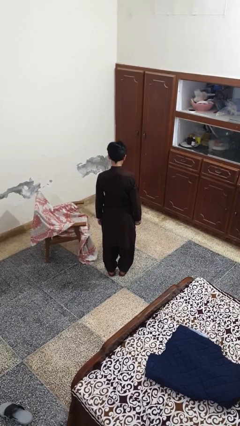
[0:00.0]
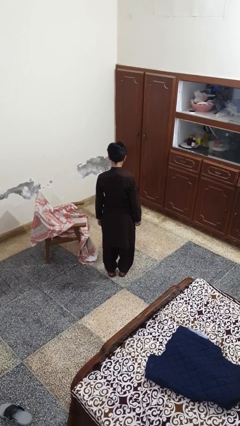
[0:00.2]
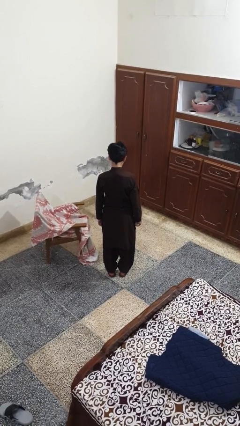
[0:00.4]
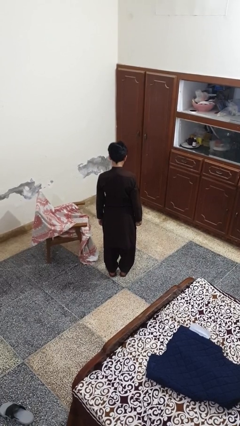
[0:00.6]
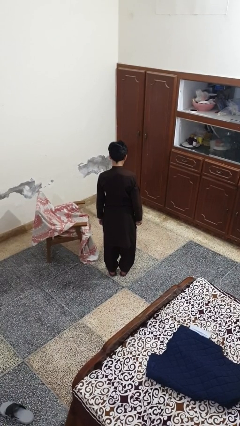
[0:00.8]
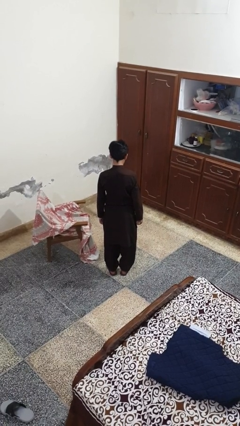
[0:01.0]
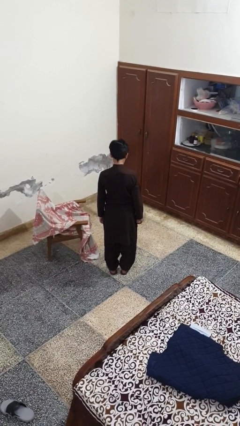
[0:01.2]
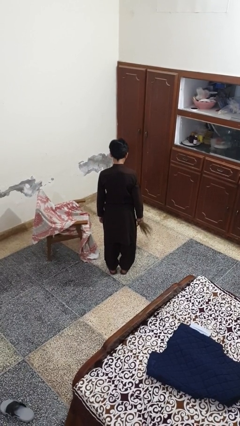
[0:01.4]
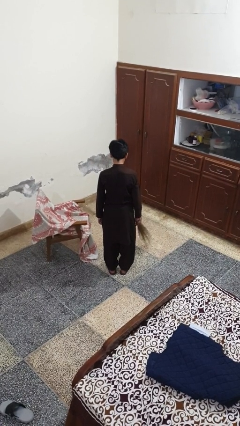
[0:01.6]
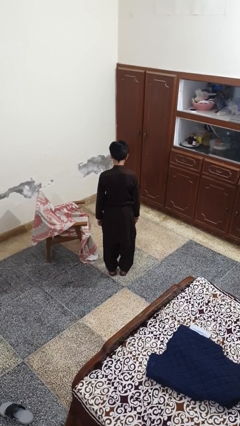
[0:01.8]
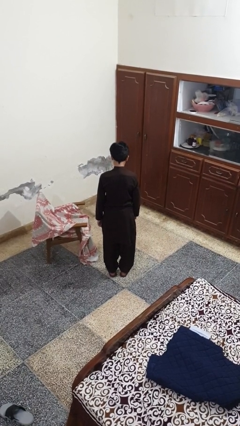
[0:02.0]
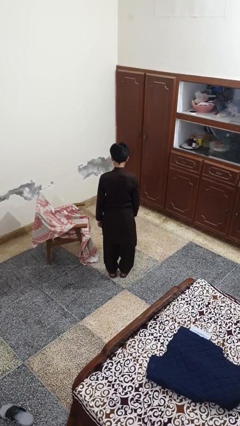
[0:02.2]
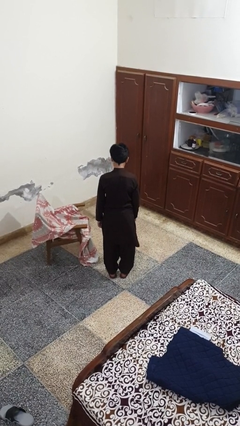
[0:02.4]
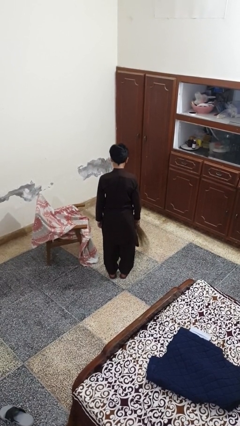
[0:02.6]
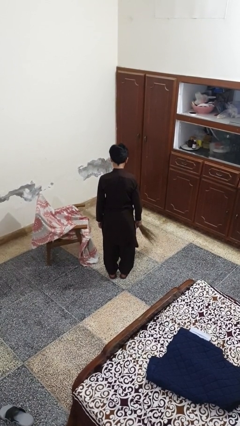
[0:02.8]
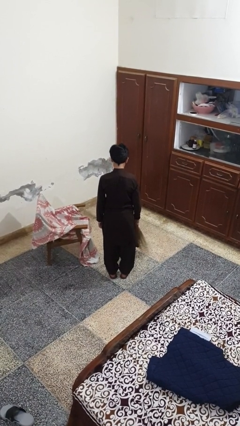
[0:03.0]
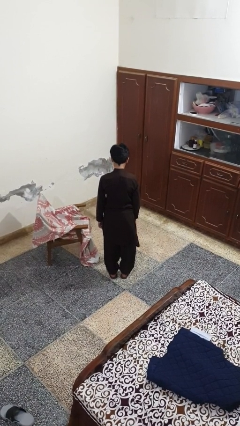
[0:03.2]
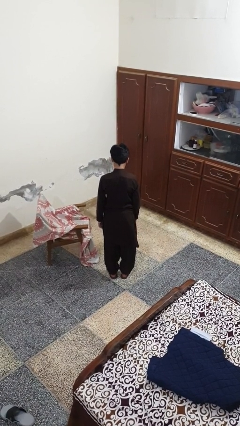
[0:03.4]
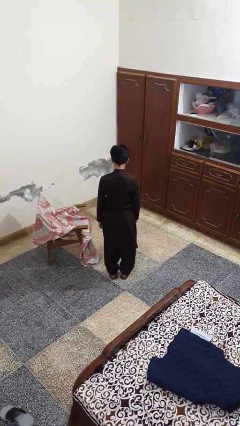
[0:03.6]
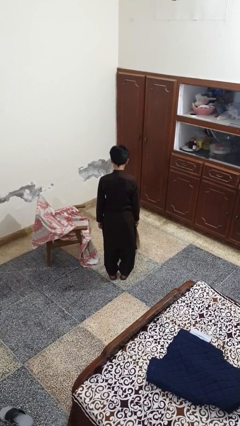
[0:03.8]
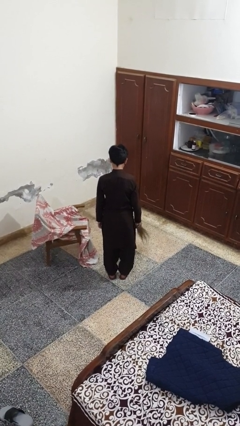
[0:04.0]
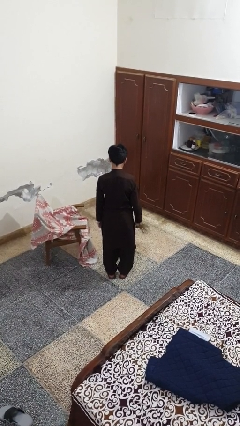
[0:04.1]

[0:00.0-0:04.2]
person sweeps floor

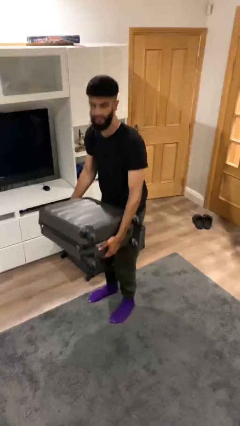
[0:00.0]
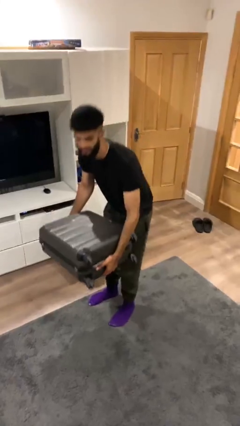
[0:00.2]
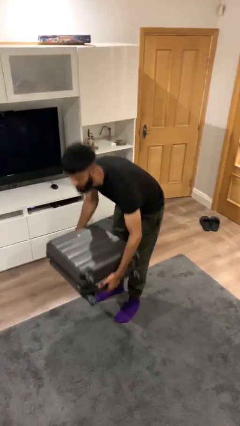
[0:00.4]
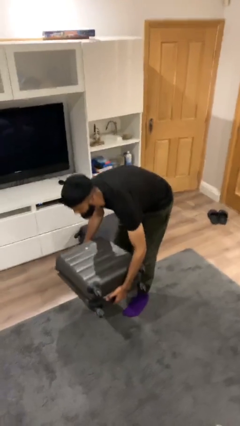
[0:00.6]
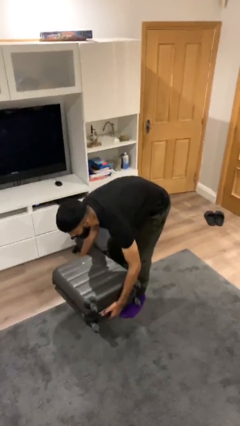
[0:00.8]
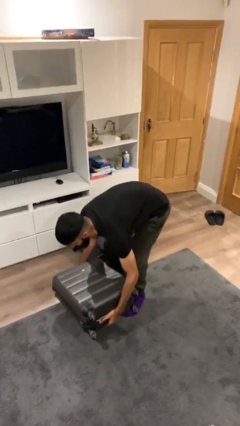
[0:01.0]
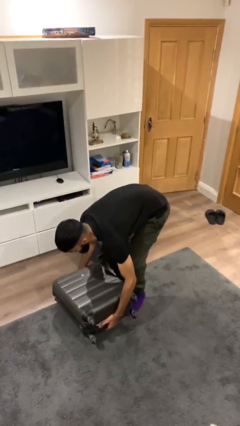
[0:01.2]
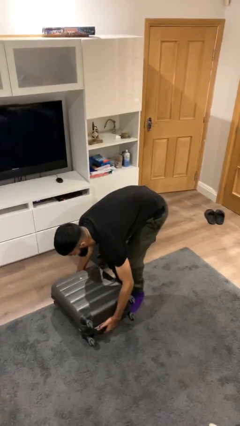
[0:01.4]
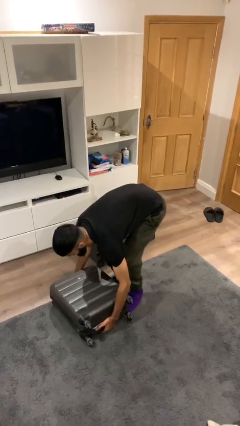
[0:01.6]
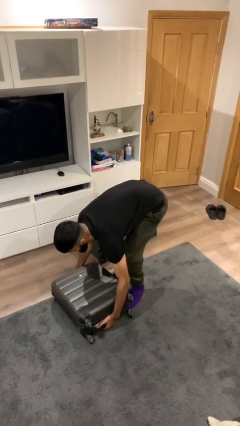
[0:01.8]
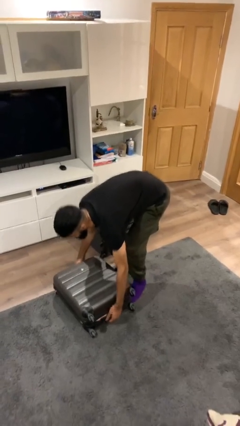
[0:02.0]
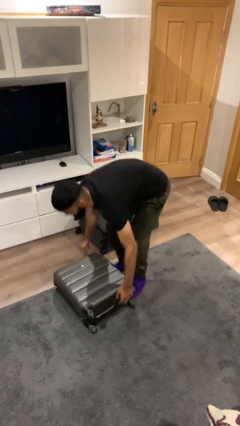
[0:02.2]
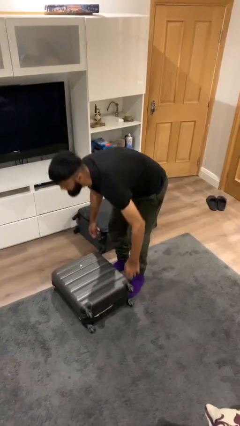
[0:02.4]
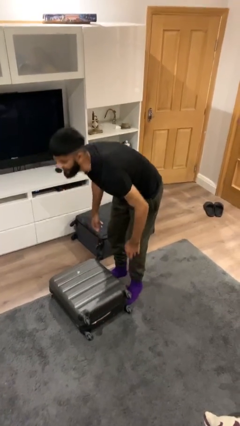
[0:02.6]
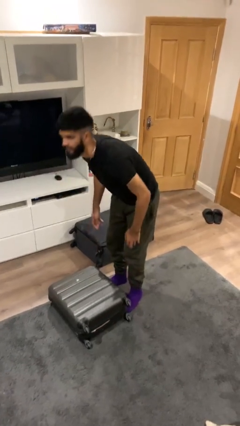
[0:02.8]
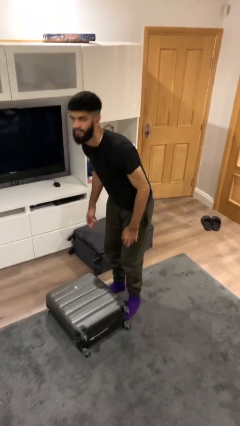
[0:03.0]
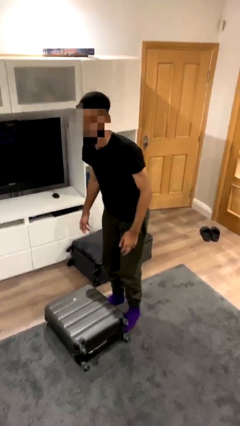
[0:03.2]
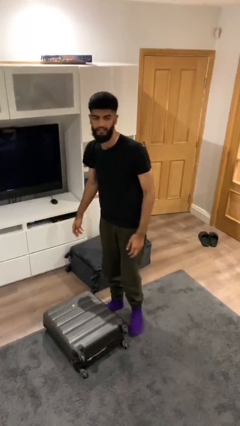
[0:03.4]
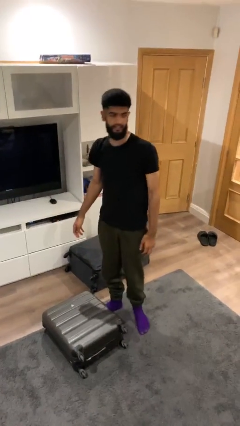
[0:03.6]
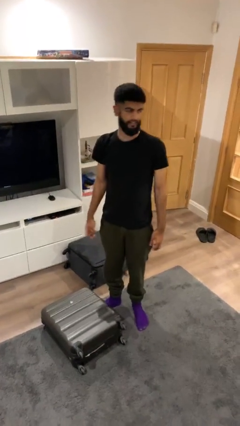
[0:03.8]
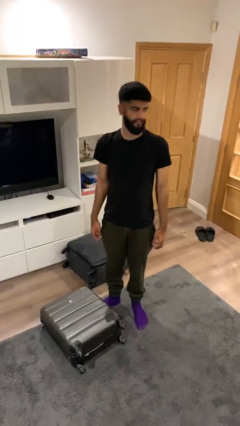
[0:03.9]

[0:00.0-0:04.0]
person puts down object on floor

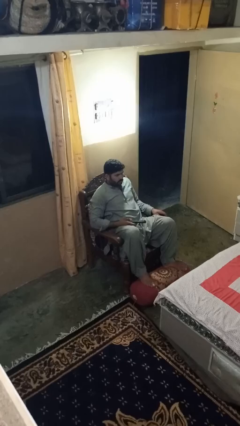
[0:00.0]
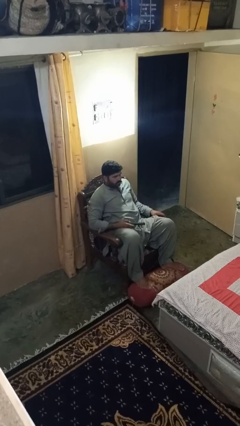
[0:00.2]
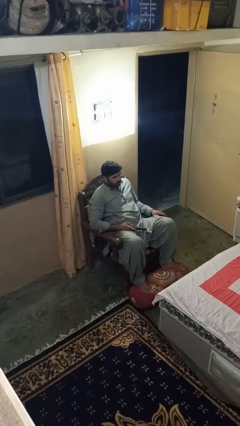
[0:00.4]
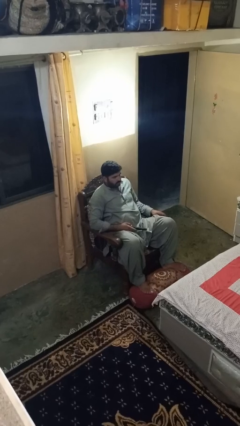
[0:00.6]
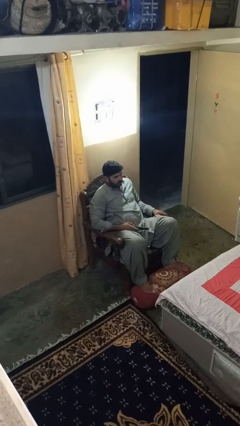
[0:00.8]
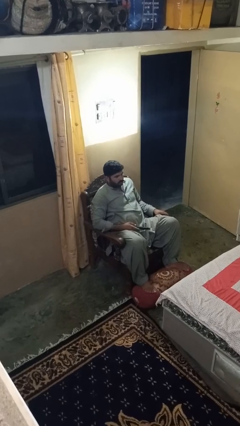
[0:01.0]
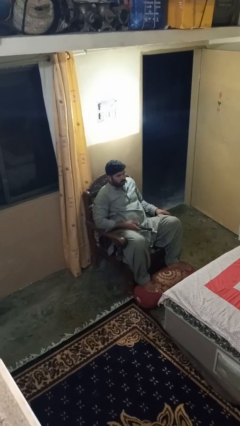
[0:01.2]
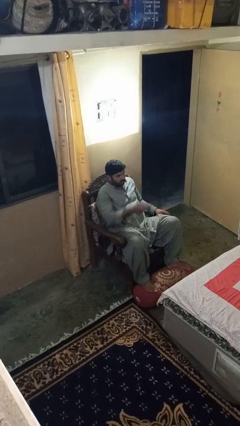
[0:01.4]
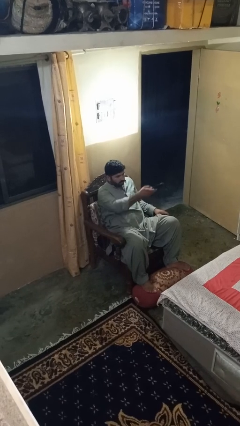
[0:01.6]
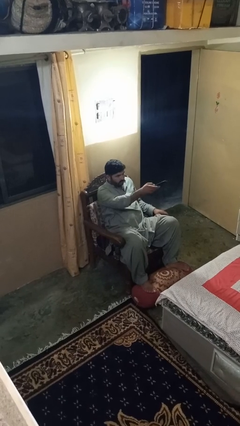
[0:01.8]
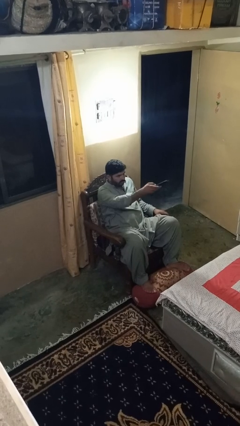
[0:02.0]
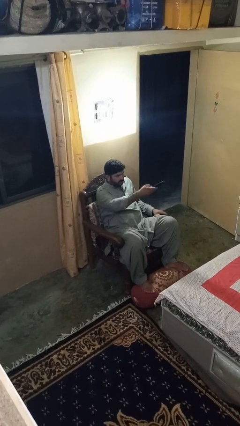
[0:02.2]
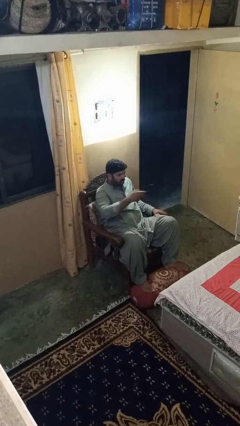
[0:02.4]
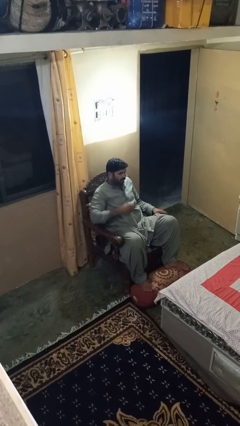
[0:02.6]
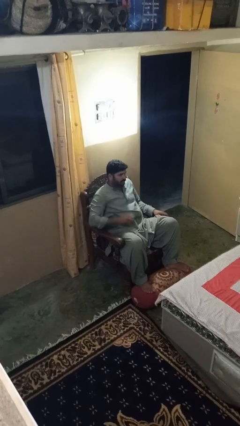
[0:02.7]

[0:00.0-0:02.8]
person uses television remote

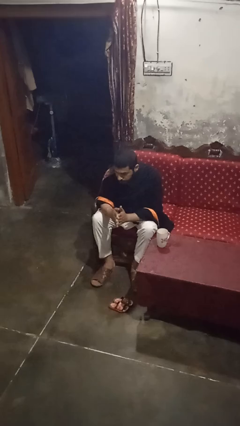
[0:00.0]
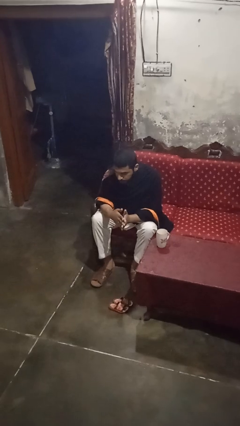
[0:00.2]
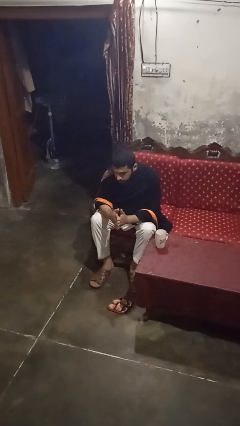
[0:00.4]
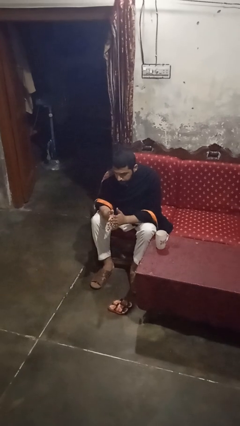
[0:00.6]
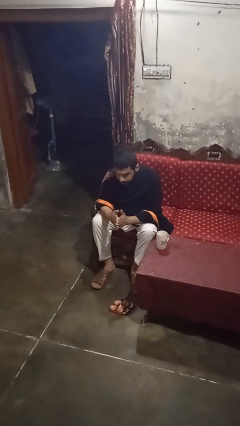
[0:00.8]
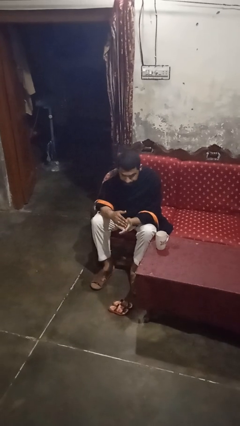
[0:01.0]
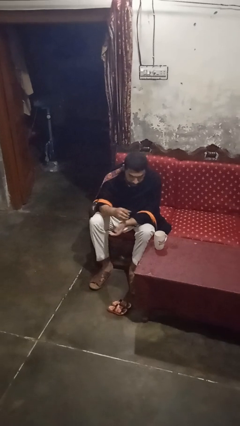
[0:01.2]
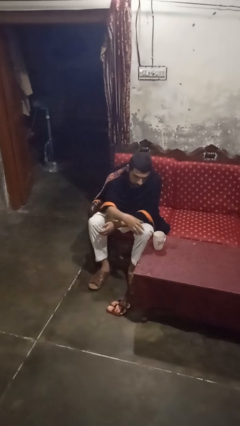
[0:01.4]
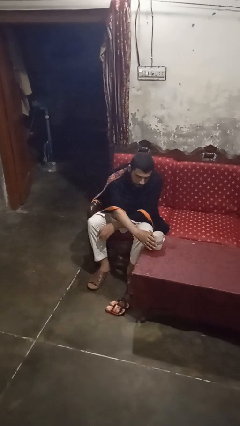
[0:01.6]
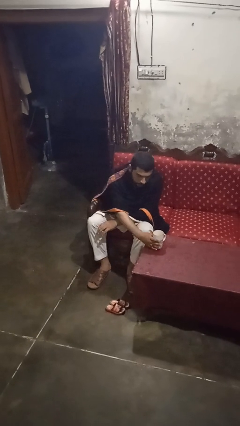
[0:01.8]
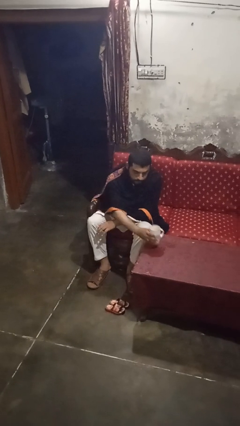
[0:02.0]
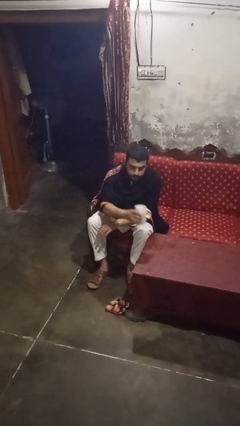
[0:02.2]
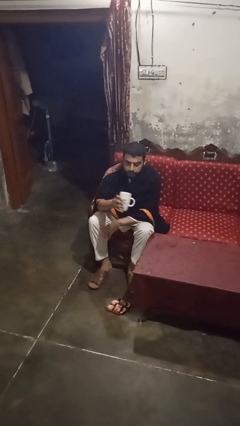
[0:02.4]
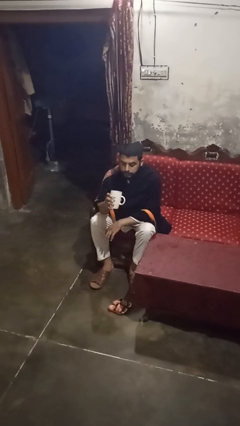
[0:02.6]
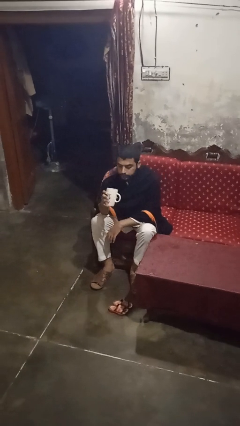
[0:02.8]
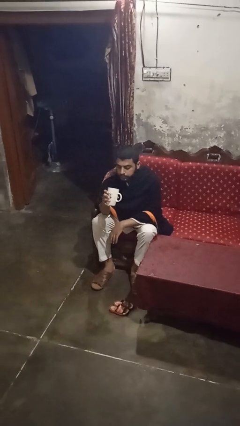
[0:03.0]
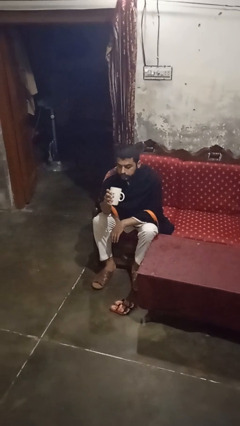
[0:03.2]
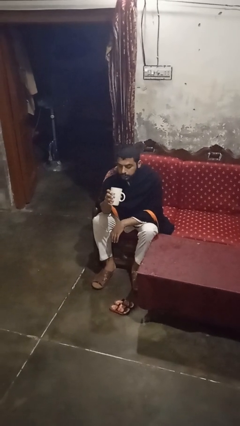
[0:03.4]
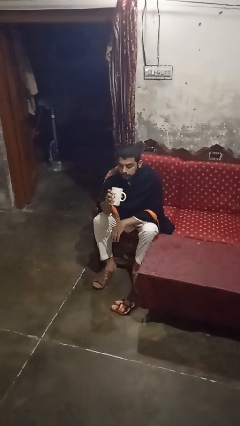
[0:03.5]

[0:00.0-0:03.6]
person picks up object from table

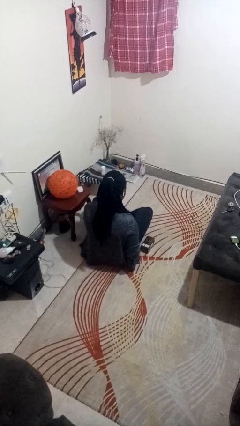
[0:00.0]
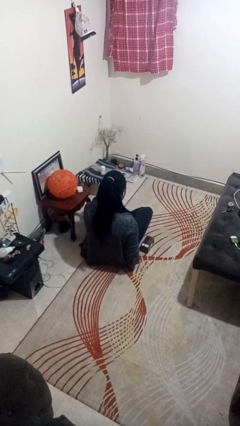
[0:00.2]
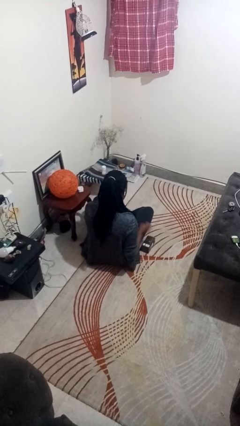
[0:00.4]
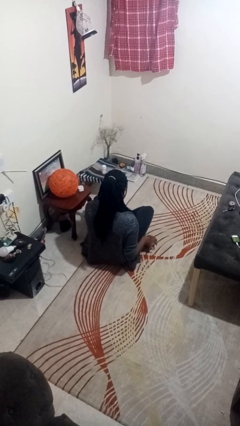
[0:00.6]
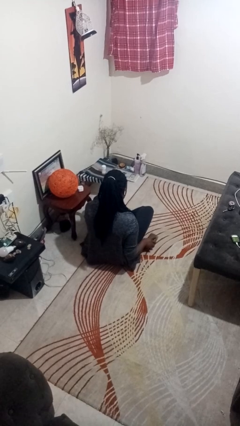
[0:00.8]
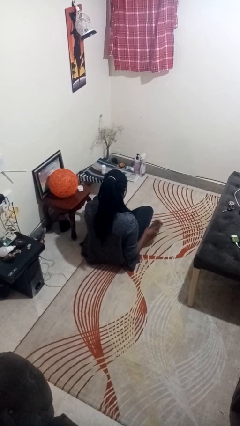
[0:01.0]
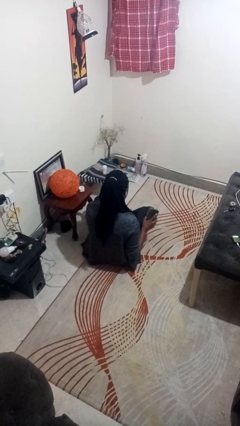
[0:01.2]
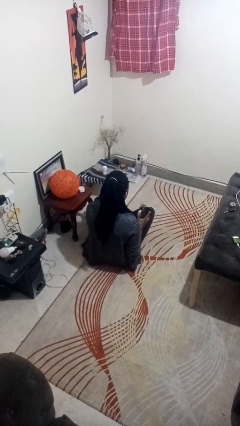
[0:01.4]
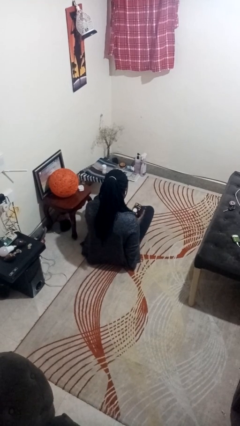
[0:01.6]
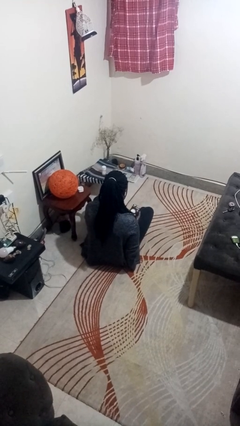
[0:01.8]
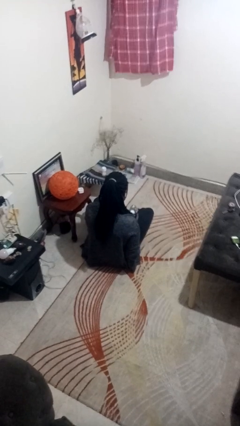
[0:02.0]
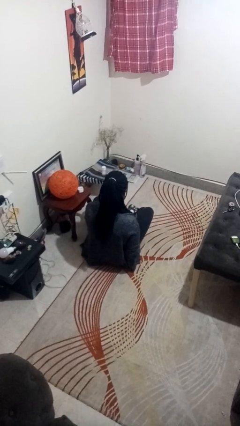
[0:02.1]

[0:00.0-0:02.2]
person picks up object from floor

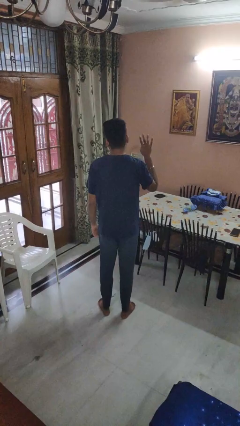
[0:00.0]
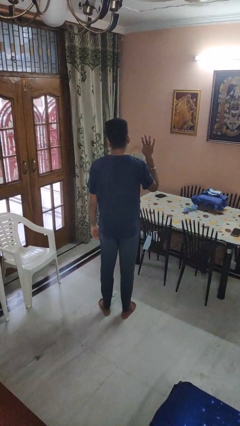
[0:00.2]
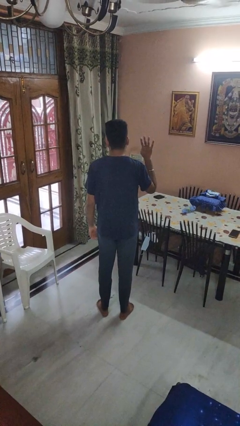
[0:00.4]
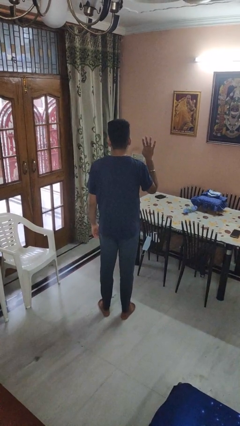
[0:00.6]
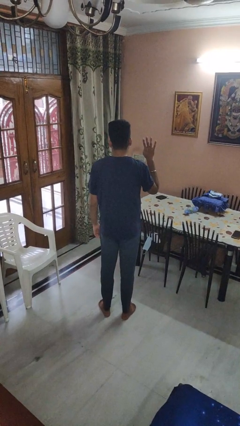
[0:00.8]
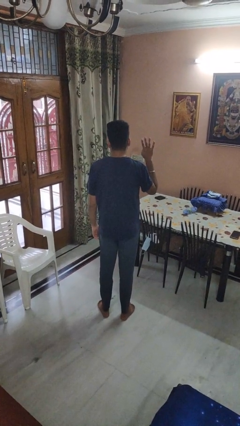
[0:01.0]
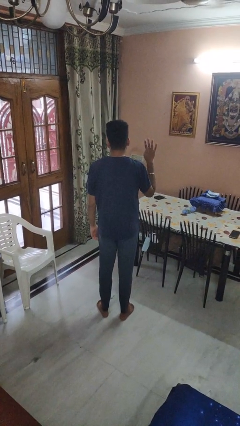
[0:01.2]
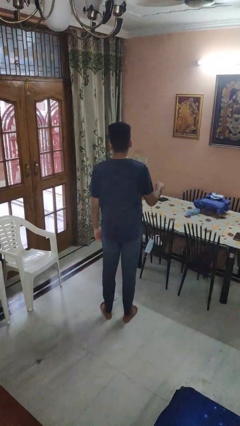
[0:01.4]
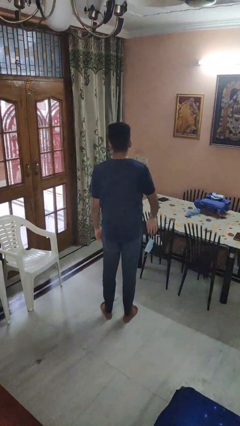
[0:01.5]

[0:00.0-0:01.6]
person gestures number four
